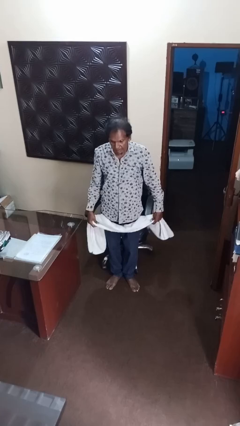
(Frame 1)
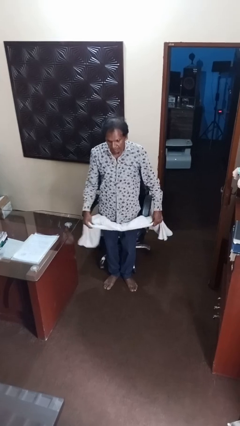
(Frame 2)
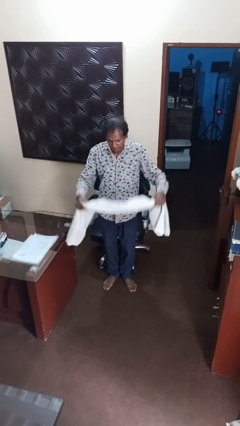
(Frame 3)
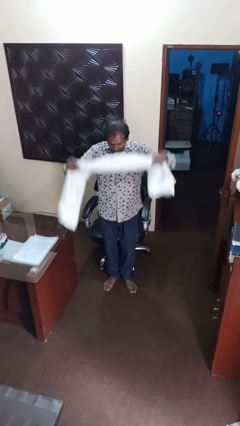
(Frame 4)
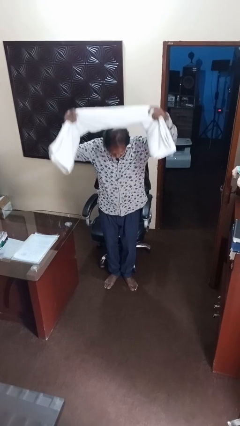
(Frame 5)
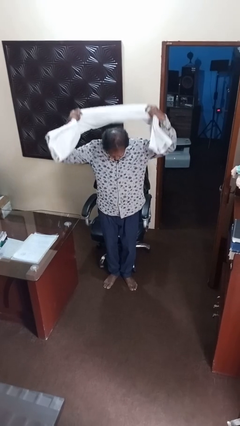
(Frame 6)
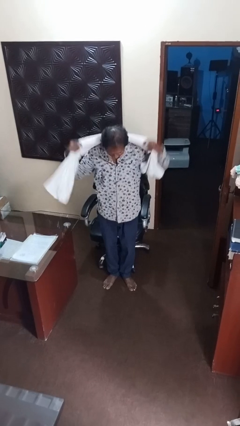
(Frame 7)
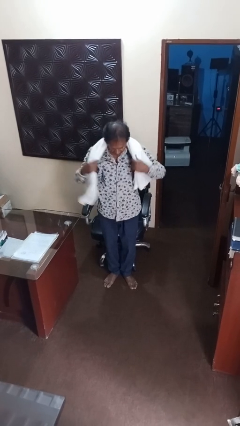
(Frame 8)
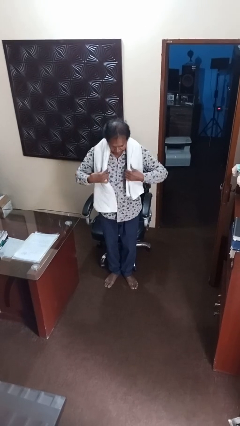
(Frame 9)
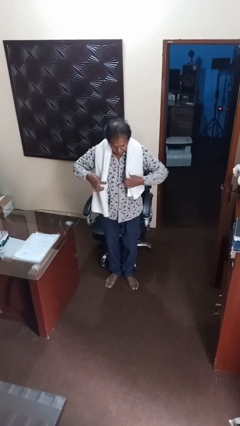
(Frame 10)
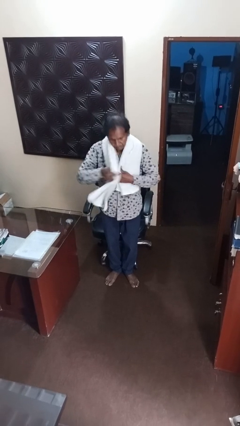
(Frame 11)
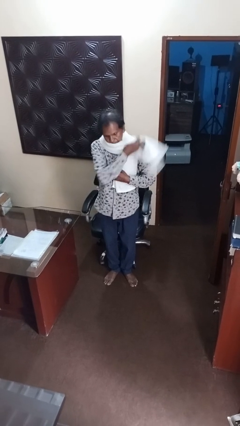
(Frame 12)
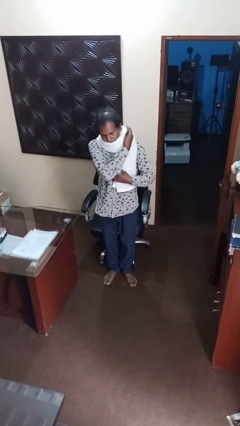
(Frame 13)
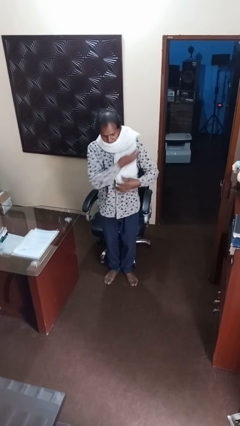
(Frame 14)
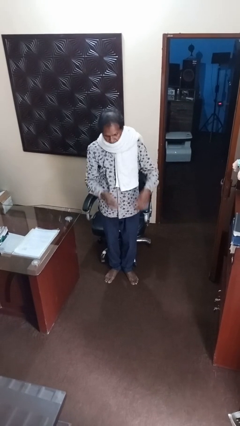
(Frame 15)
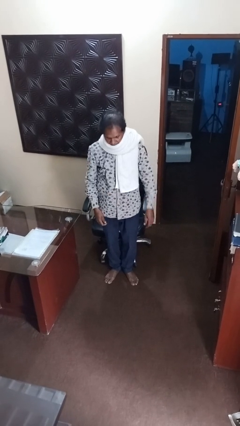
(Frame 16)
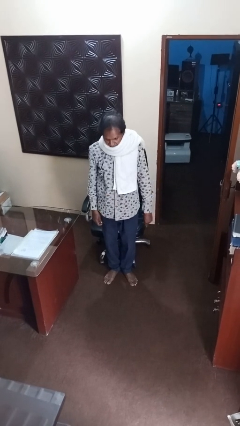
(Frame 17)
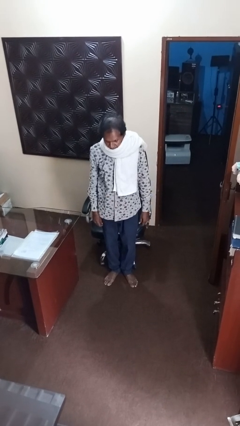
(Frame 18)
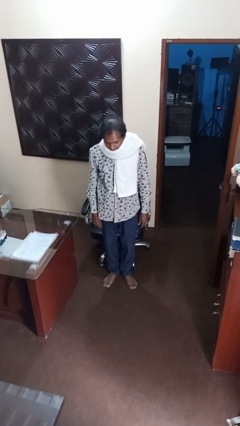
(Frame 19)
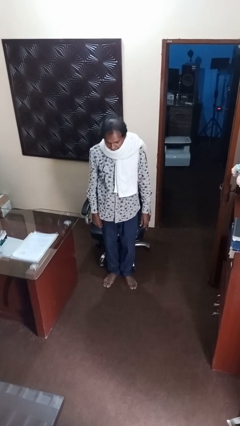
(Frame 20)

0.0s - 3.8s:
person puts on scarf

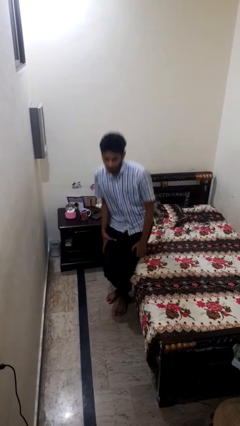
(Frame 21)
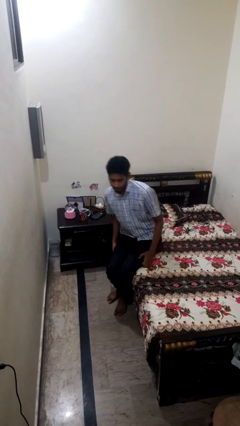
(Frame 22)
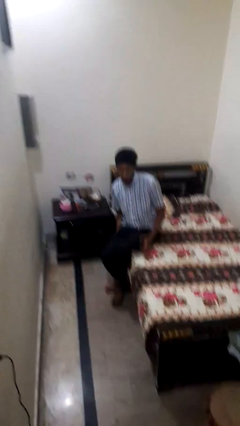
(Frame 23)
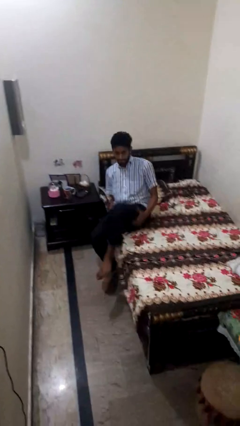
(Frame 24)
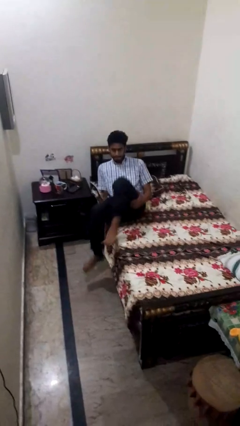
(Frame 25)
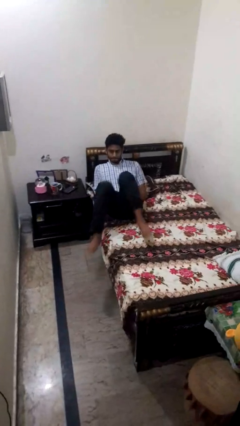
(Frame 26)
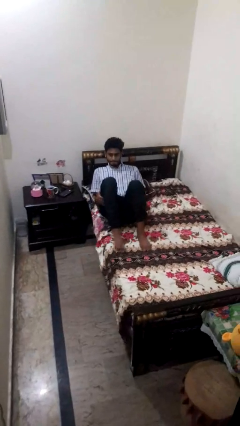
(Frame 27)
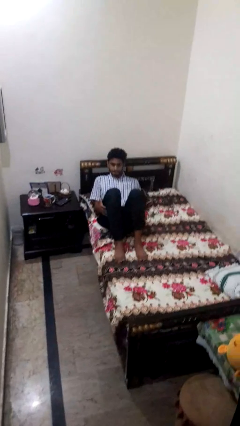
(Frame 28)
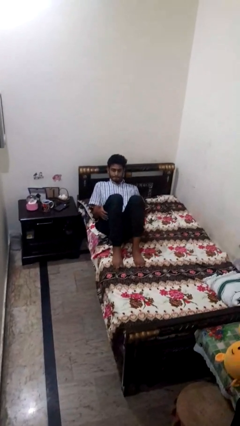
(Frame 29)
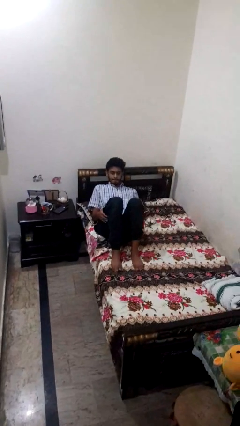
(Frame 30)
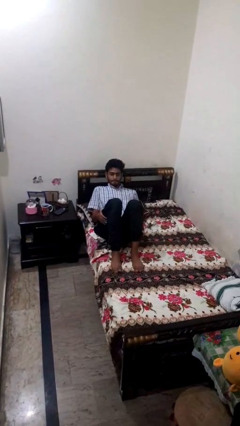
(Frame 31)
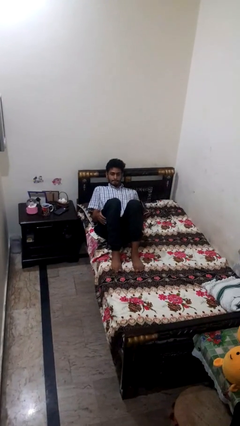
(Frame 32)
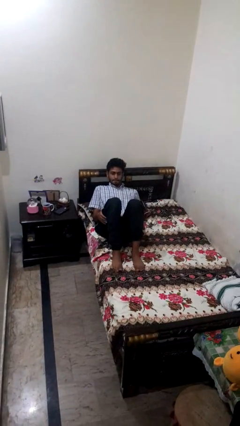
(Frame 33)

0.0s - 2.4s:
person lies down on bed

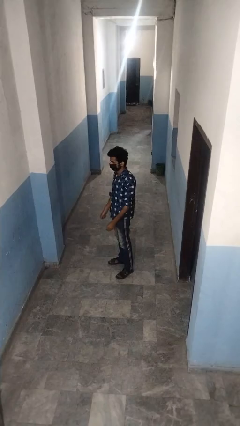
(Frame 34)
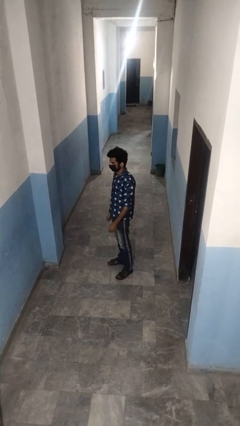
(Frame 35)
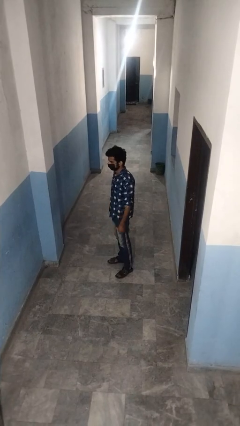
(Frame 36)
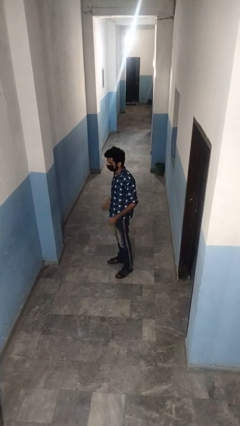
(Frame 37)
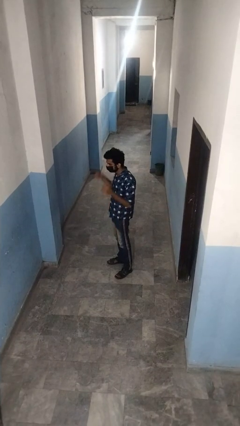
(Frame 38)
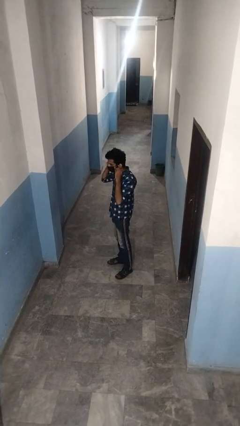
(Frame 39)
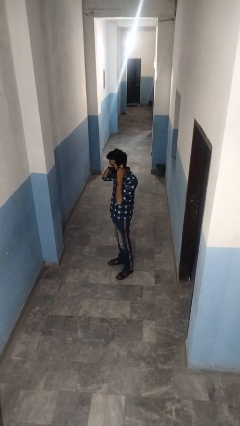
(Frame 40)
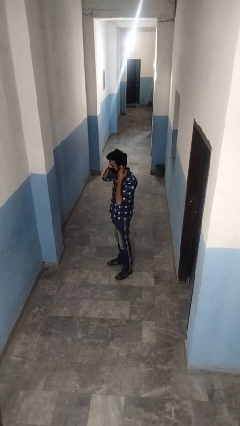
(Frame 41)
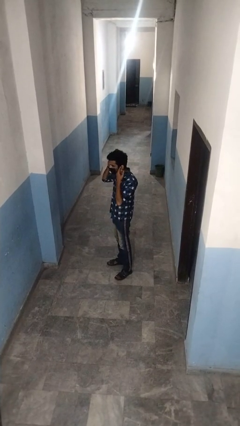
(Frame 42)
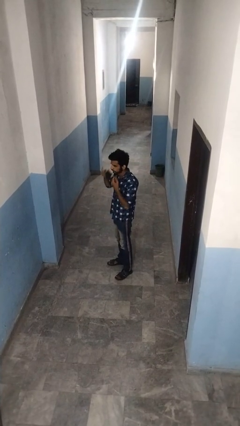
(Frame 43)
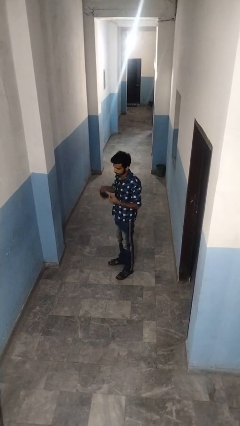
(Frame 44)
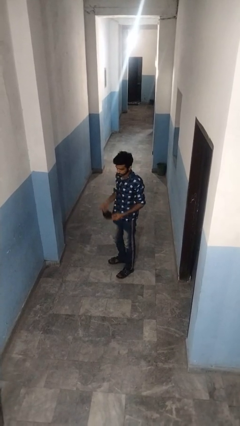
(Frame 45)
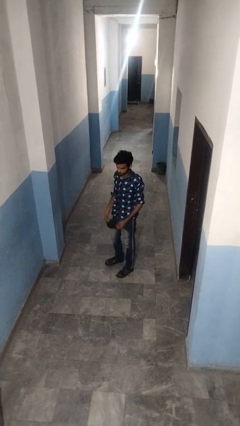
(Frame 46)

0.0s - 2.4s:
person takes off facemask

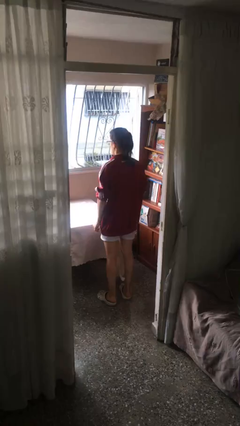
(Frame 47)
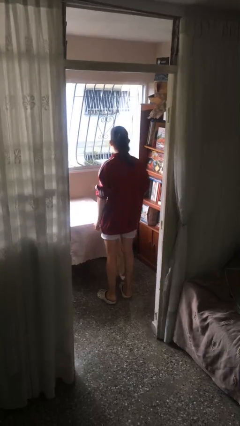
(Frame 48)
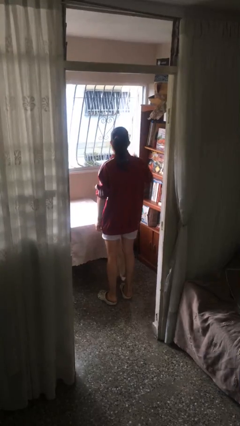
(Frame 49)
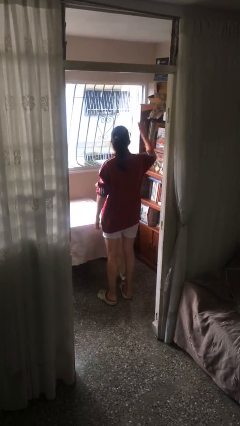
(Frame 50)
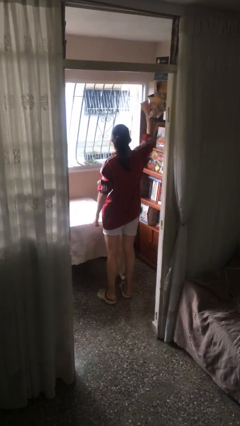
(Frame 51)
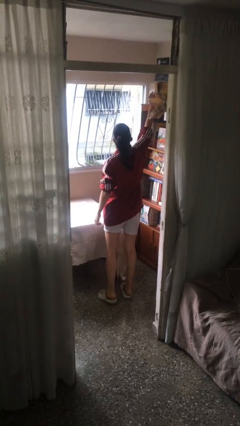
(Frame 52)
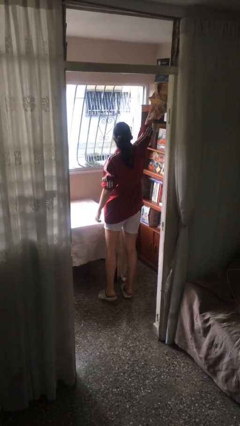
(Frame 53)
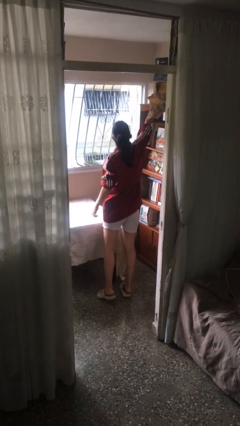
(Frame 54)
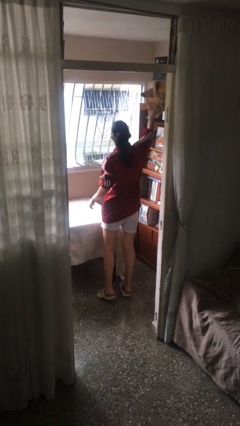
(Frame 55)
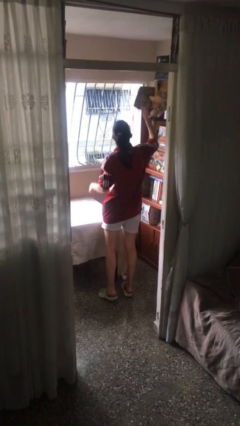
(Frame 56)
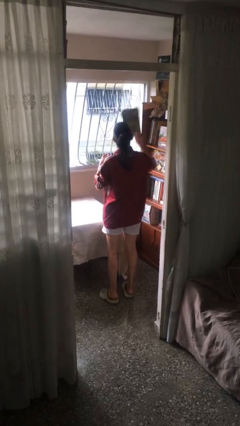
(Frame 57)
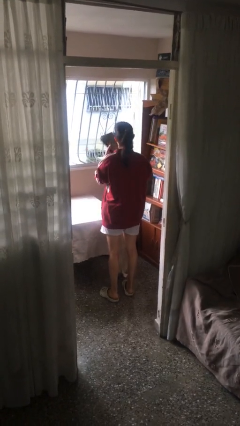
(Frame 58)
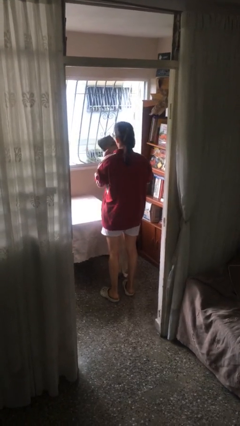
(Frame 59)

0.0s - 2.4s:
person picks up object from shelf

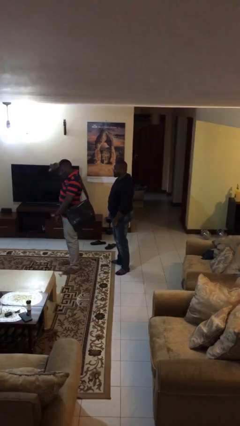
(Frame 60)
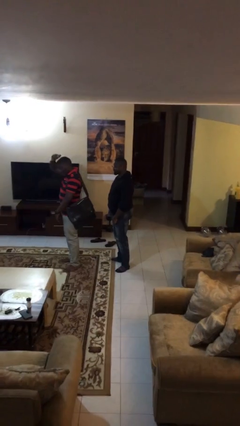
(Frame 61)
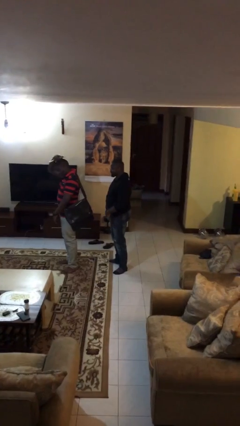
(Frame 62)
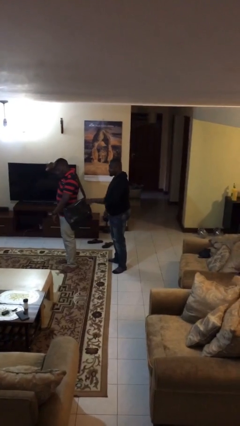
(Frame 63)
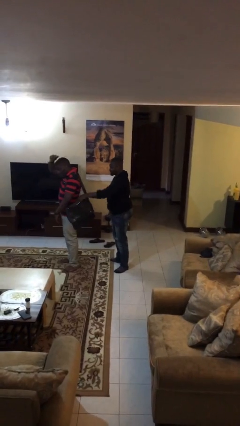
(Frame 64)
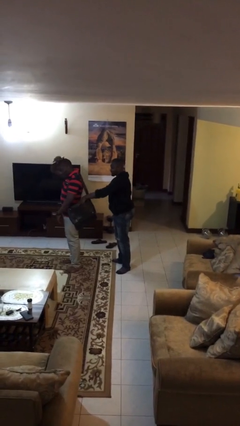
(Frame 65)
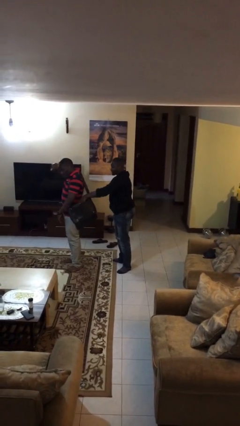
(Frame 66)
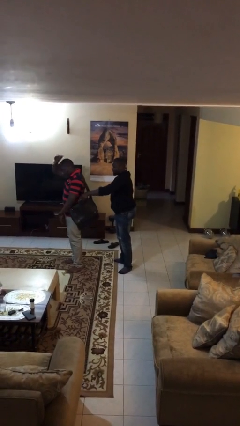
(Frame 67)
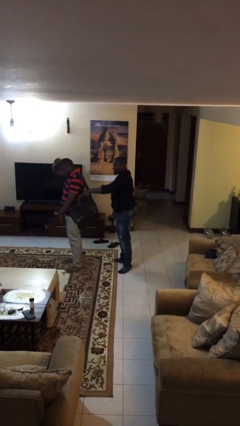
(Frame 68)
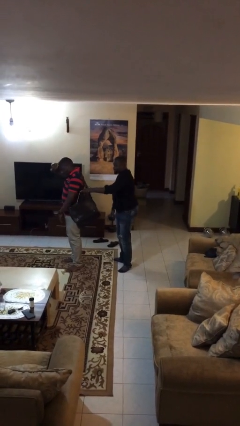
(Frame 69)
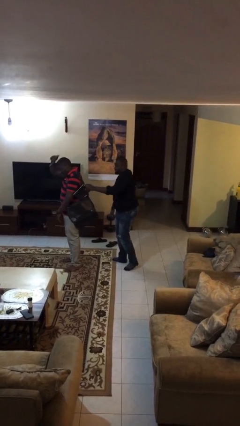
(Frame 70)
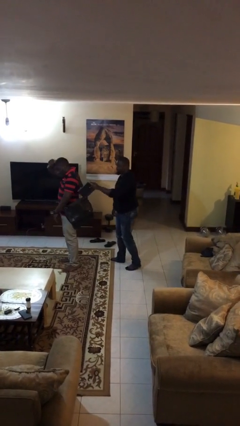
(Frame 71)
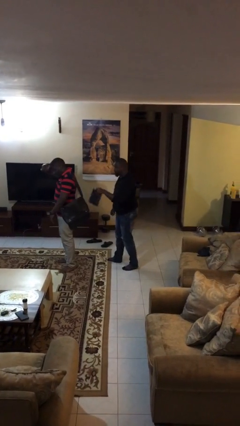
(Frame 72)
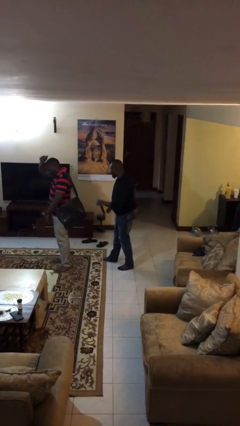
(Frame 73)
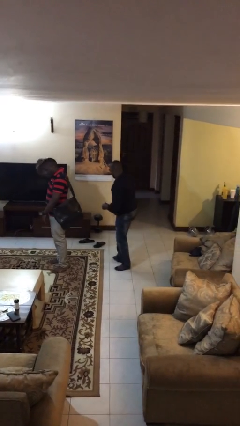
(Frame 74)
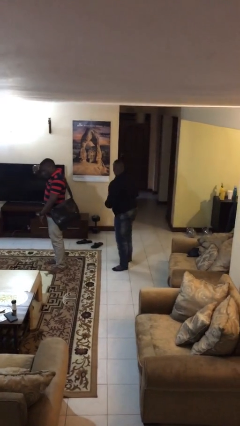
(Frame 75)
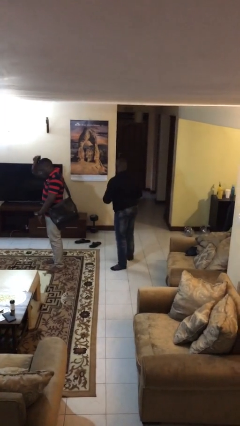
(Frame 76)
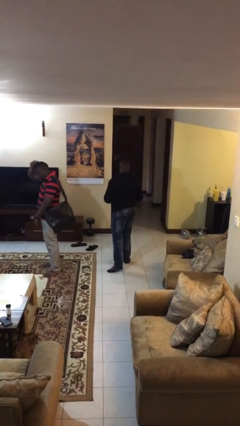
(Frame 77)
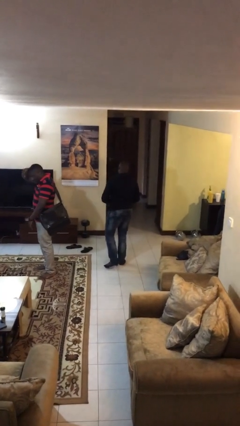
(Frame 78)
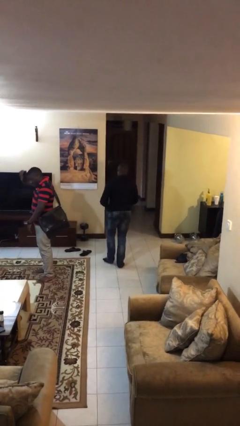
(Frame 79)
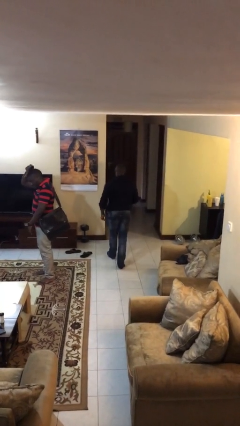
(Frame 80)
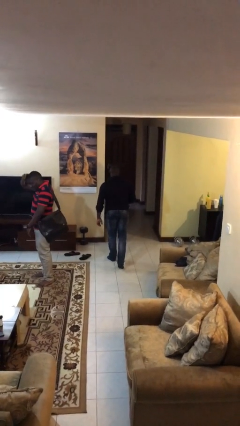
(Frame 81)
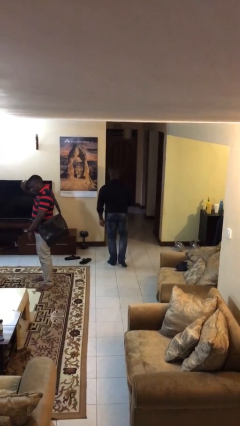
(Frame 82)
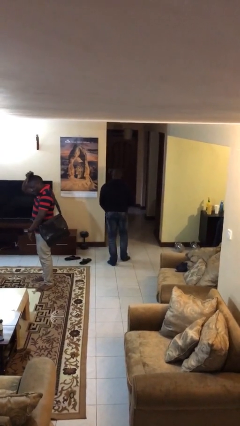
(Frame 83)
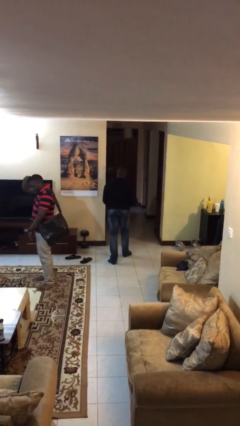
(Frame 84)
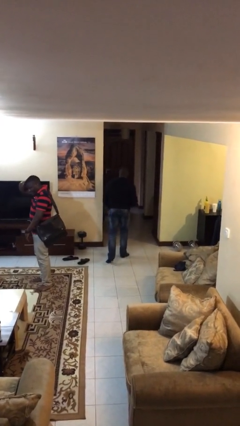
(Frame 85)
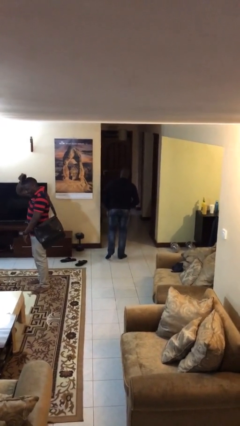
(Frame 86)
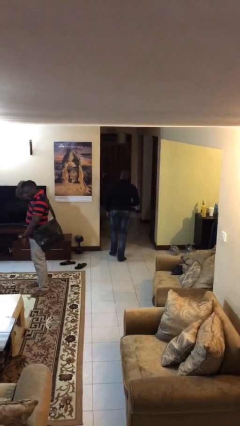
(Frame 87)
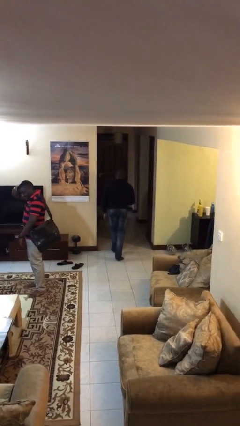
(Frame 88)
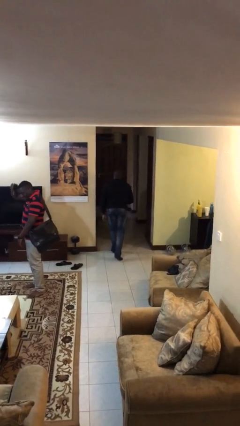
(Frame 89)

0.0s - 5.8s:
person steals object from person

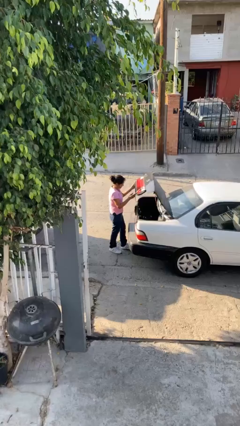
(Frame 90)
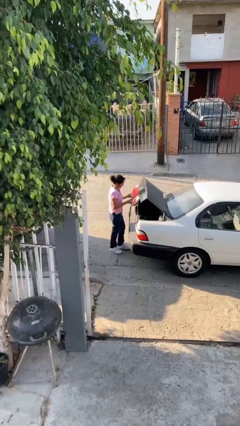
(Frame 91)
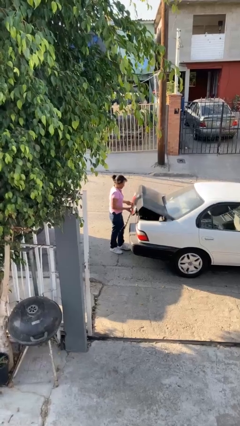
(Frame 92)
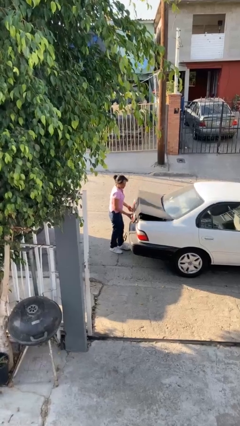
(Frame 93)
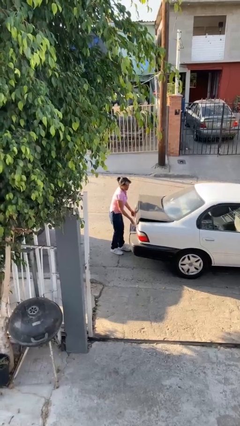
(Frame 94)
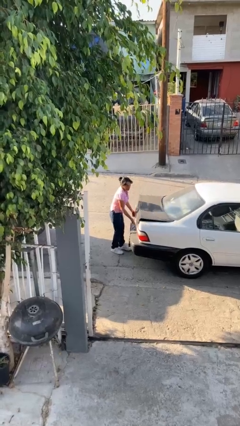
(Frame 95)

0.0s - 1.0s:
person closes car trunk
